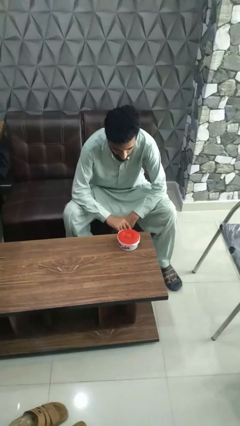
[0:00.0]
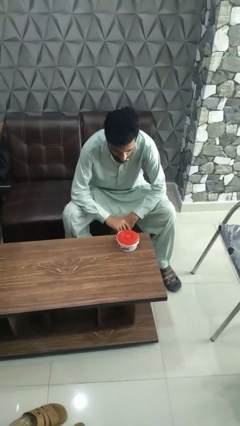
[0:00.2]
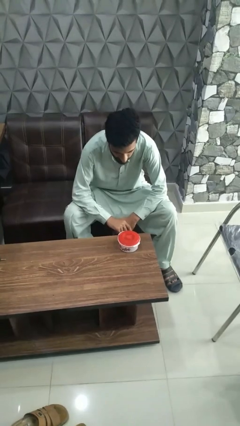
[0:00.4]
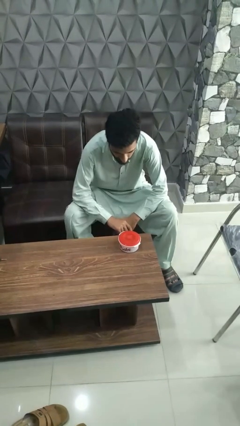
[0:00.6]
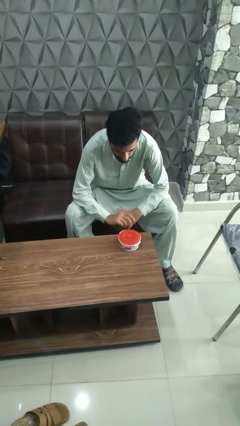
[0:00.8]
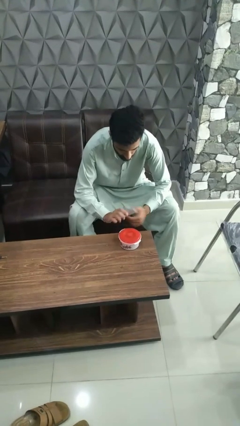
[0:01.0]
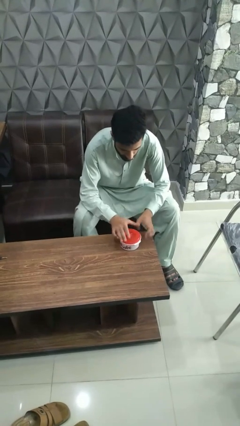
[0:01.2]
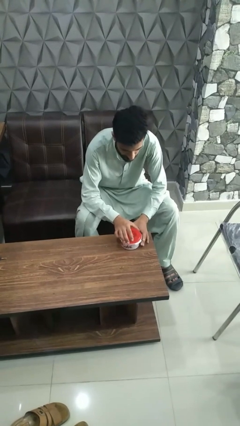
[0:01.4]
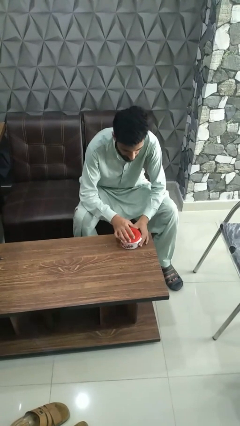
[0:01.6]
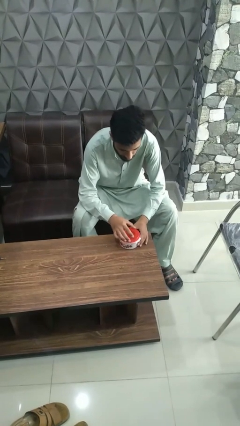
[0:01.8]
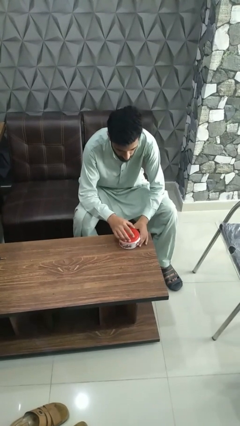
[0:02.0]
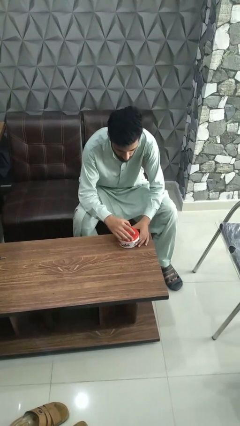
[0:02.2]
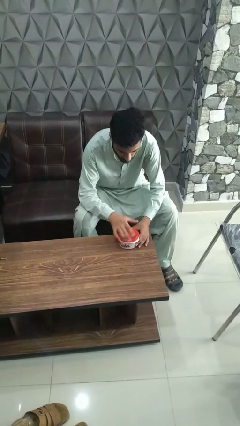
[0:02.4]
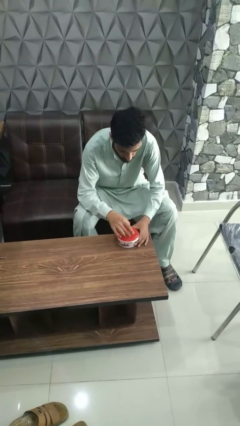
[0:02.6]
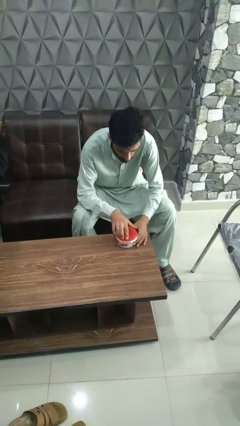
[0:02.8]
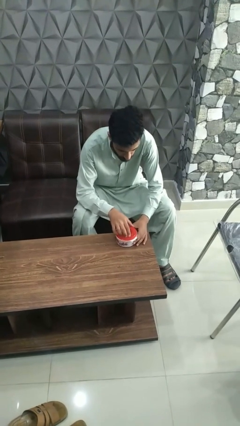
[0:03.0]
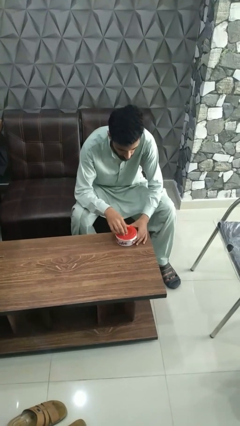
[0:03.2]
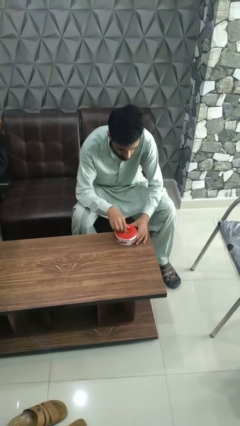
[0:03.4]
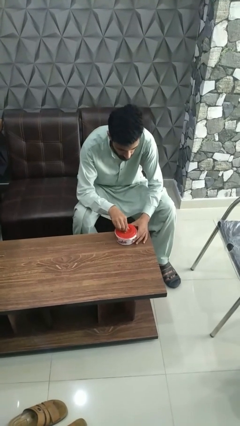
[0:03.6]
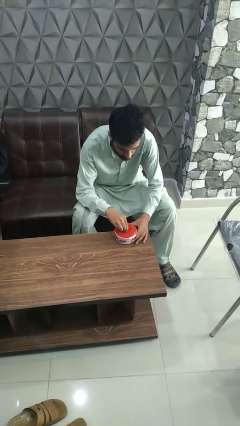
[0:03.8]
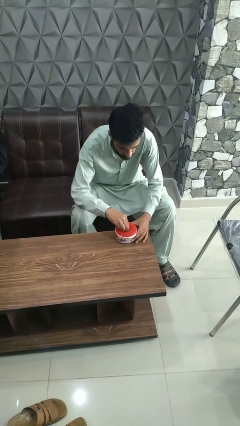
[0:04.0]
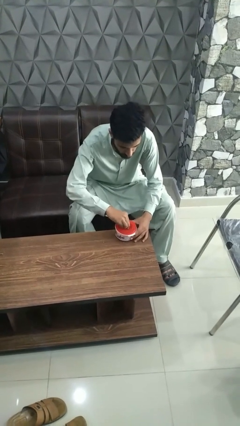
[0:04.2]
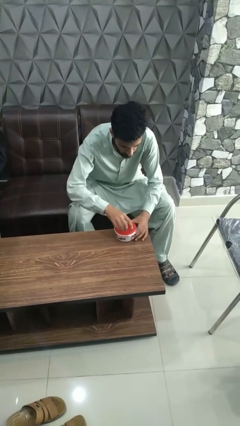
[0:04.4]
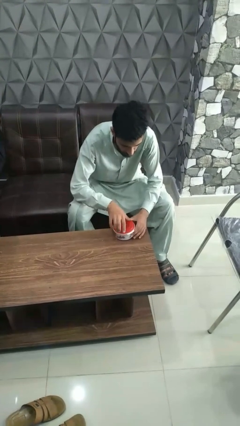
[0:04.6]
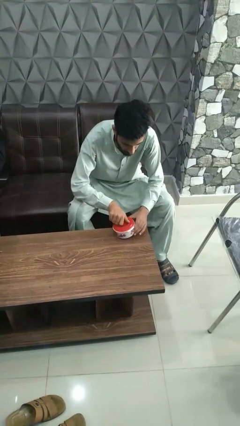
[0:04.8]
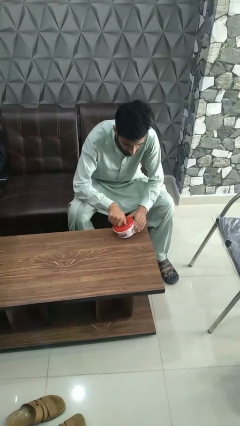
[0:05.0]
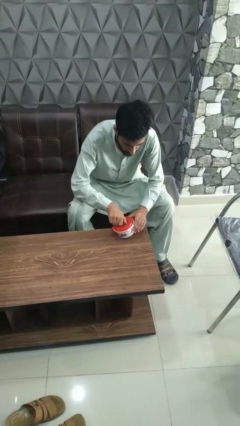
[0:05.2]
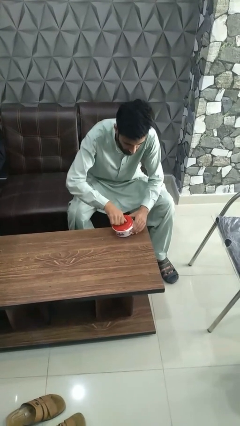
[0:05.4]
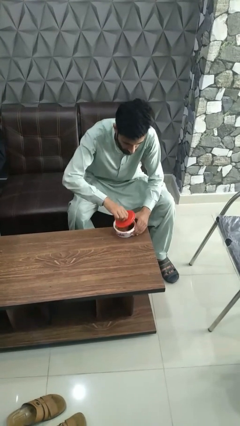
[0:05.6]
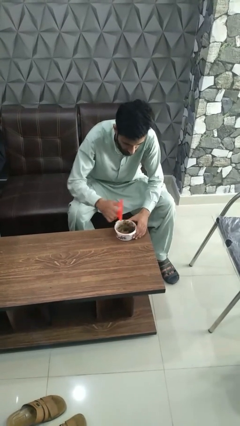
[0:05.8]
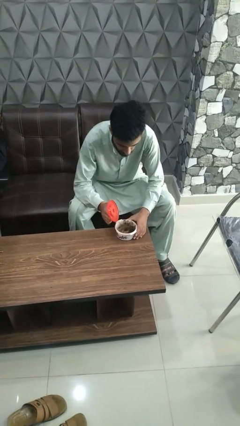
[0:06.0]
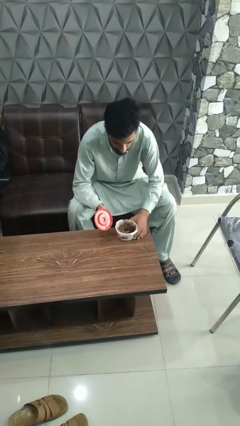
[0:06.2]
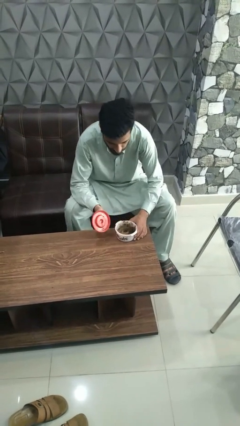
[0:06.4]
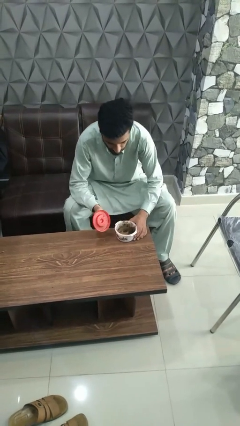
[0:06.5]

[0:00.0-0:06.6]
person opens jar

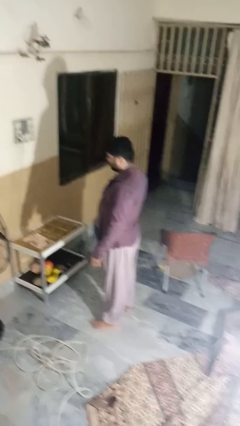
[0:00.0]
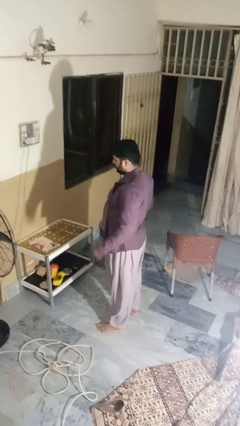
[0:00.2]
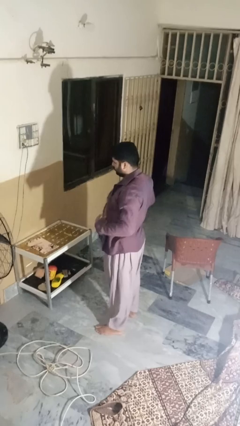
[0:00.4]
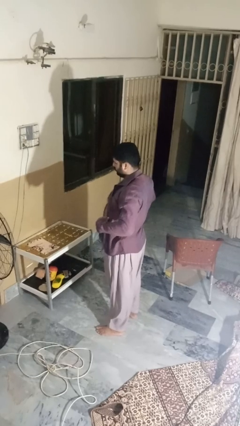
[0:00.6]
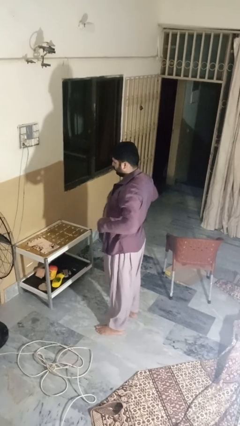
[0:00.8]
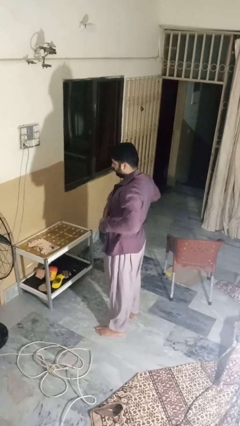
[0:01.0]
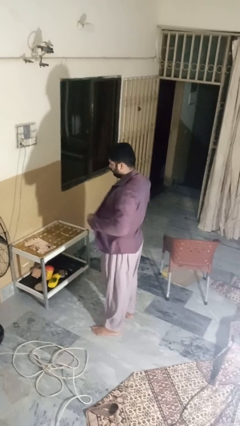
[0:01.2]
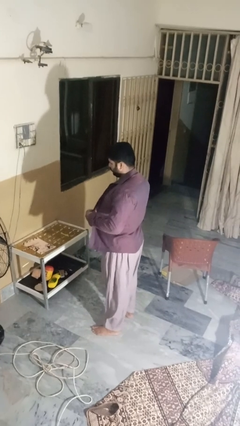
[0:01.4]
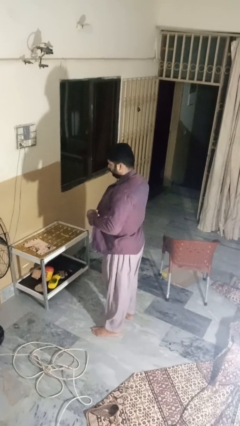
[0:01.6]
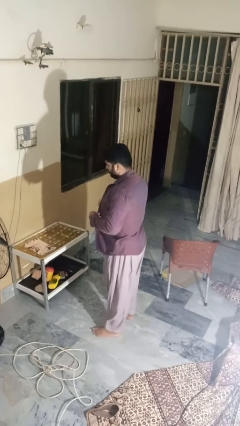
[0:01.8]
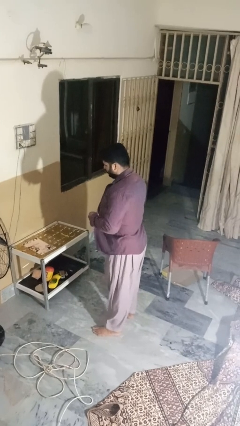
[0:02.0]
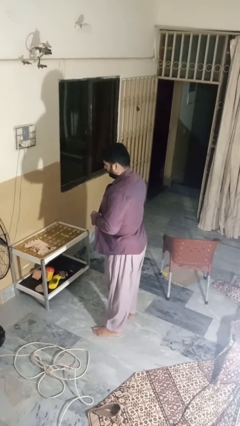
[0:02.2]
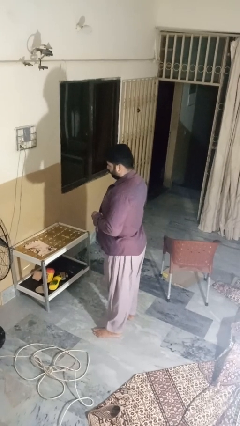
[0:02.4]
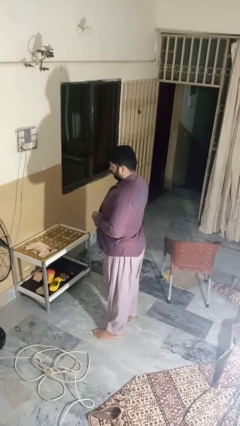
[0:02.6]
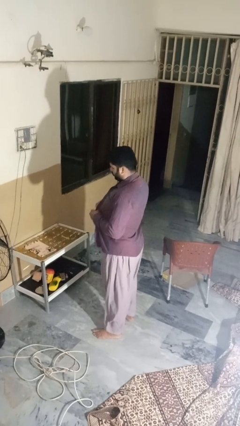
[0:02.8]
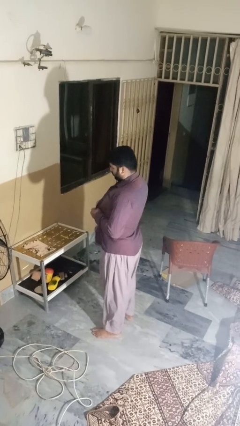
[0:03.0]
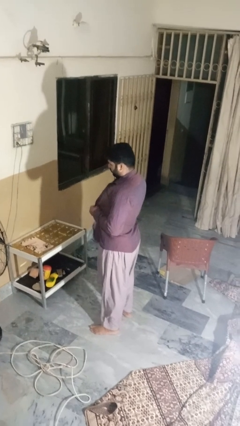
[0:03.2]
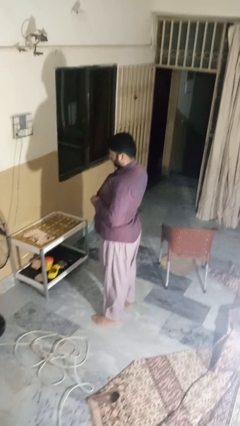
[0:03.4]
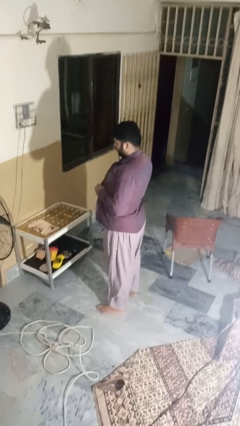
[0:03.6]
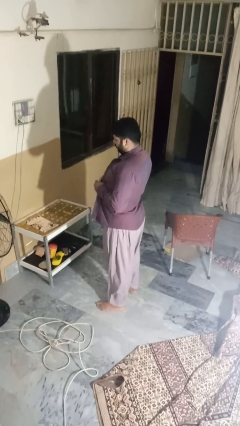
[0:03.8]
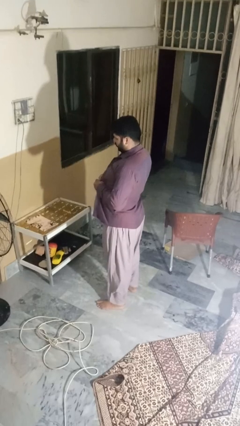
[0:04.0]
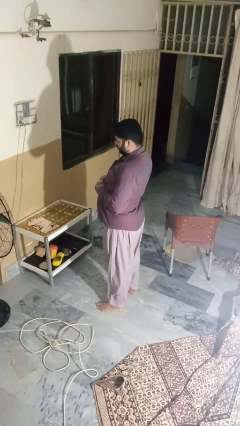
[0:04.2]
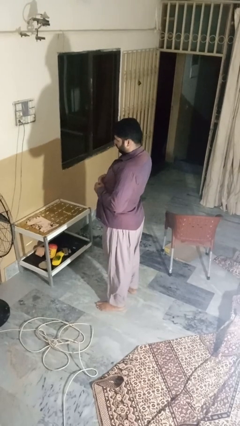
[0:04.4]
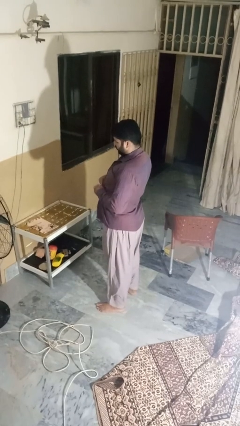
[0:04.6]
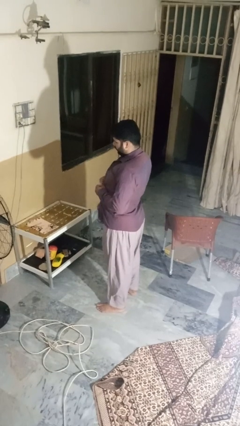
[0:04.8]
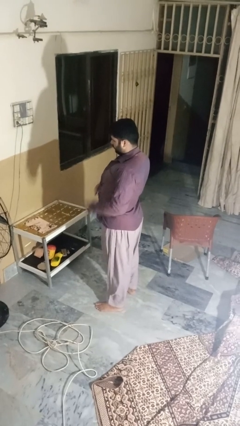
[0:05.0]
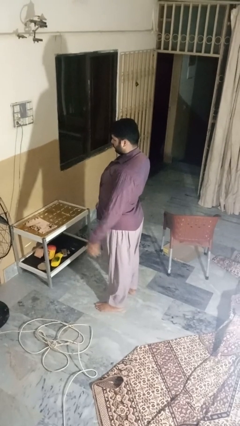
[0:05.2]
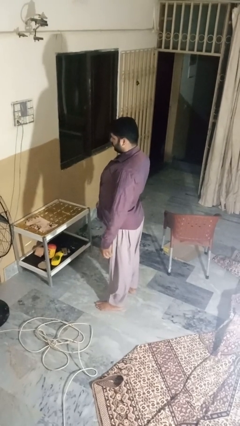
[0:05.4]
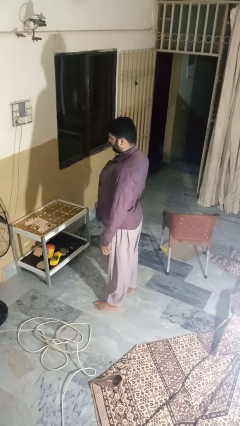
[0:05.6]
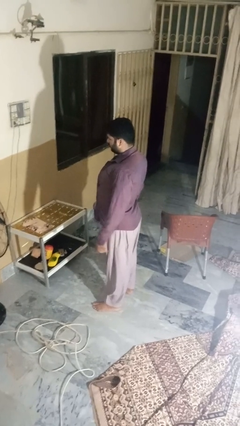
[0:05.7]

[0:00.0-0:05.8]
person buttons shirt

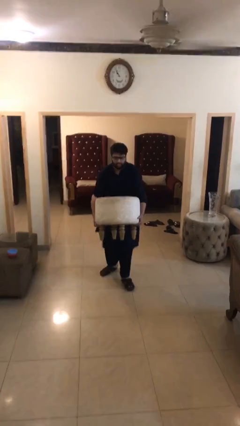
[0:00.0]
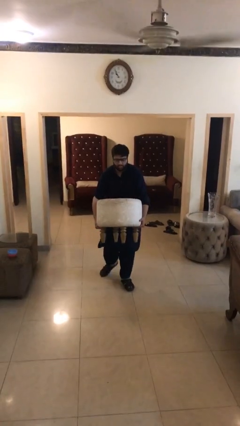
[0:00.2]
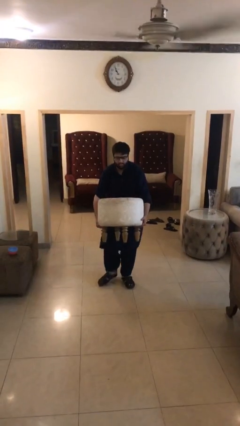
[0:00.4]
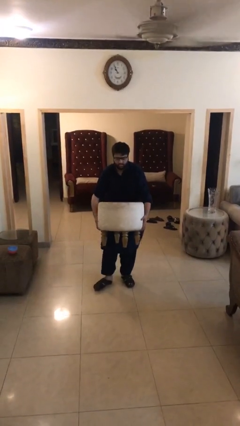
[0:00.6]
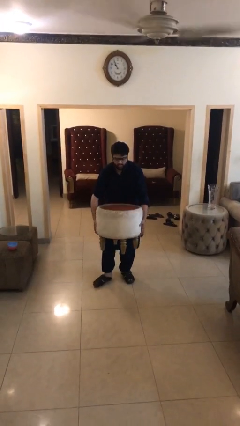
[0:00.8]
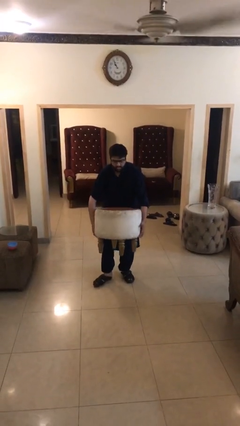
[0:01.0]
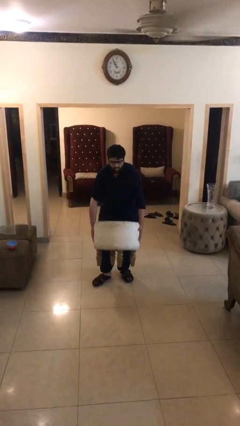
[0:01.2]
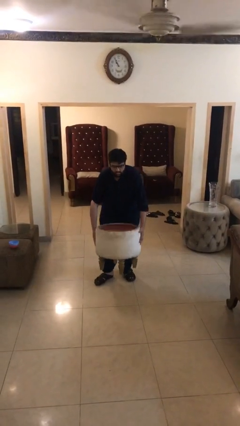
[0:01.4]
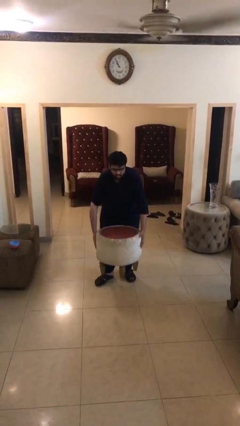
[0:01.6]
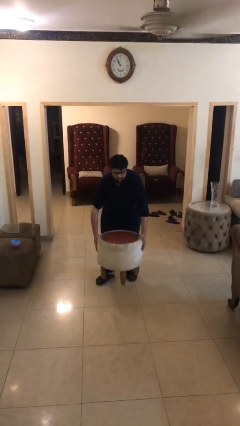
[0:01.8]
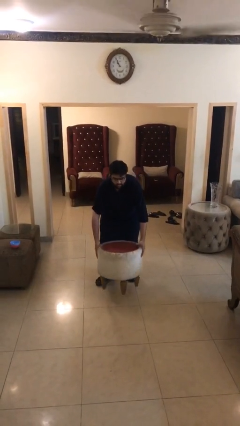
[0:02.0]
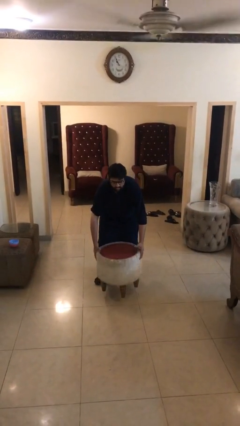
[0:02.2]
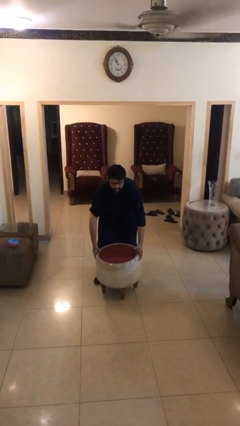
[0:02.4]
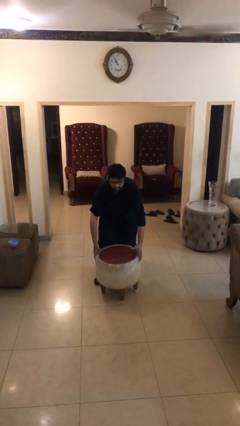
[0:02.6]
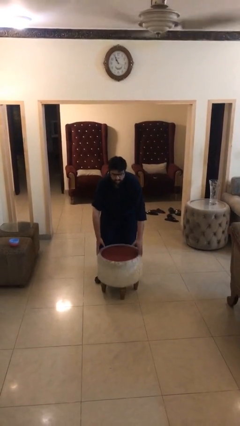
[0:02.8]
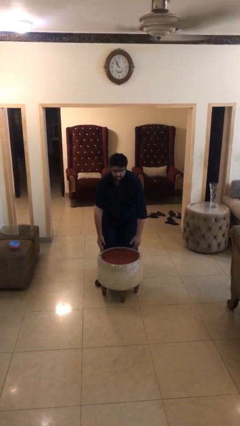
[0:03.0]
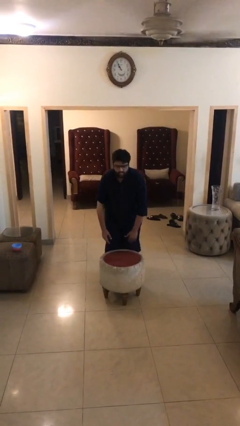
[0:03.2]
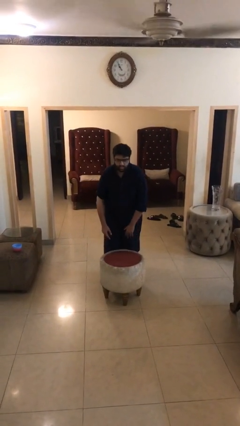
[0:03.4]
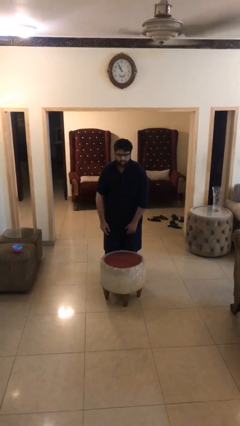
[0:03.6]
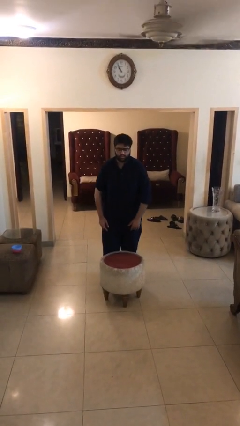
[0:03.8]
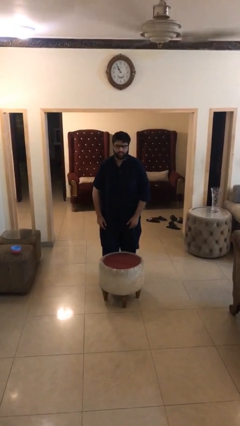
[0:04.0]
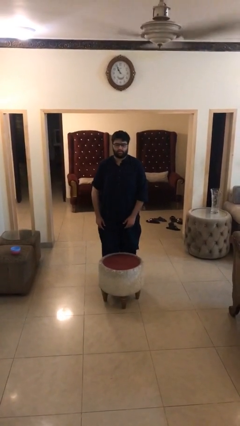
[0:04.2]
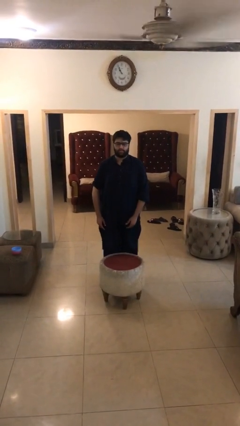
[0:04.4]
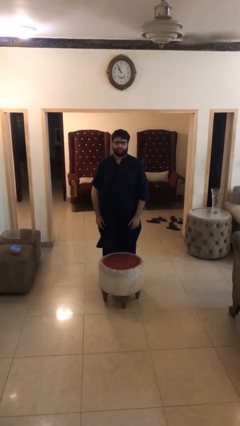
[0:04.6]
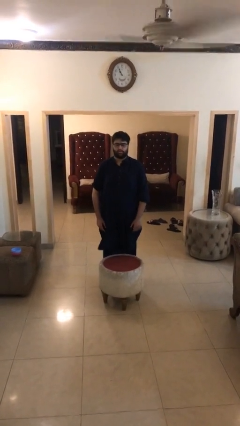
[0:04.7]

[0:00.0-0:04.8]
person puts down object on floor

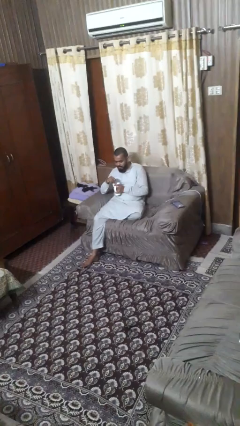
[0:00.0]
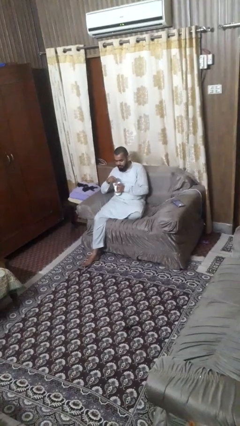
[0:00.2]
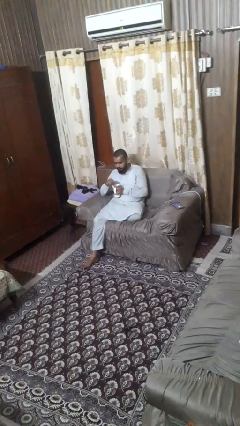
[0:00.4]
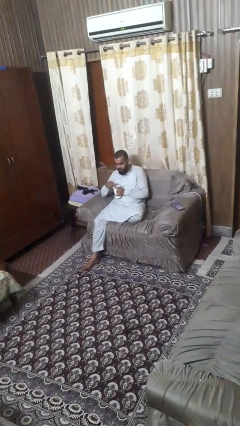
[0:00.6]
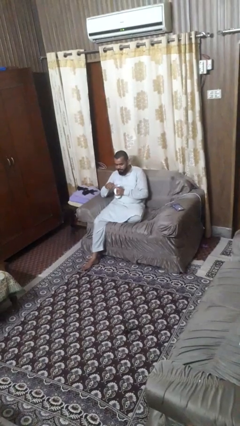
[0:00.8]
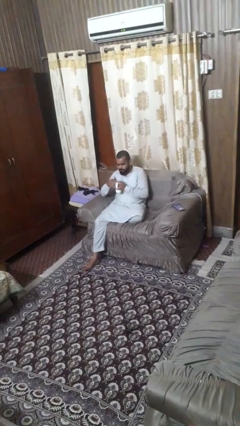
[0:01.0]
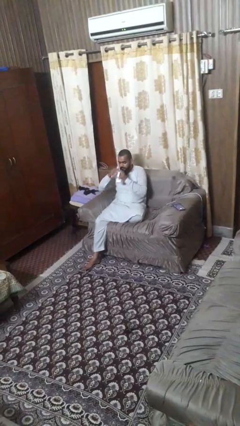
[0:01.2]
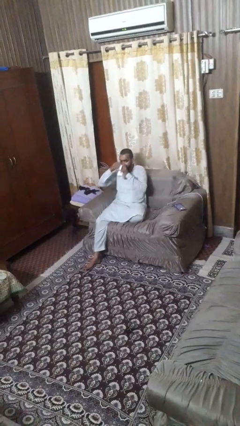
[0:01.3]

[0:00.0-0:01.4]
person stirs mug
